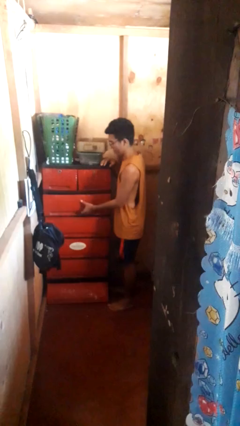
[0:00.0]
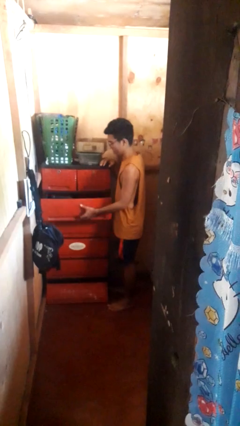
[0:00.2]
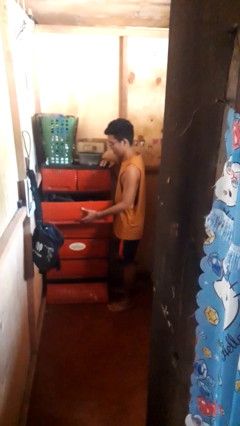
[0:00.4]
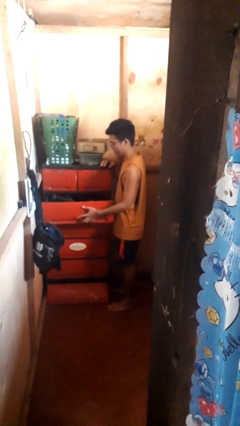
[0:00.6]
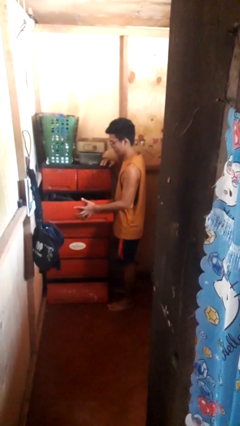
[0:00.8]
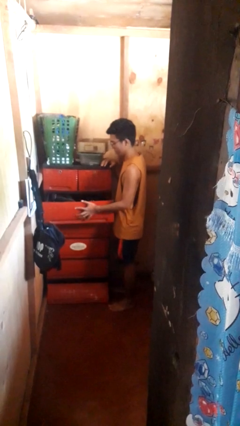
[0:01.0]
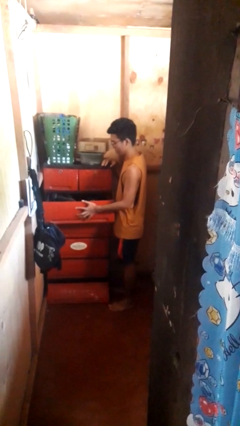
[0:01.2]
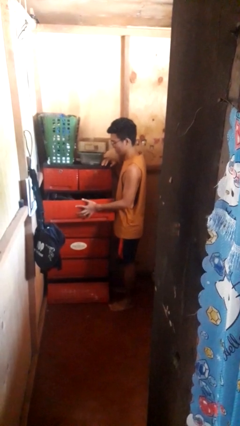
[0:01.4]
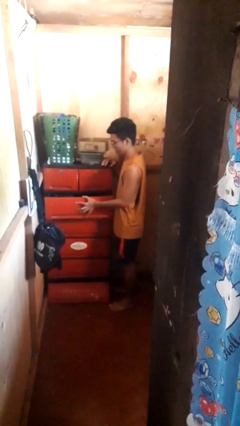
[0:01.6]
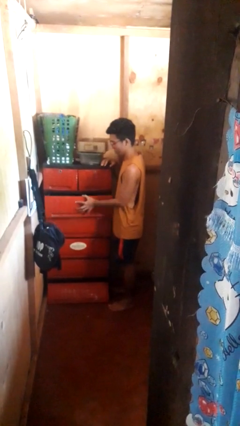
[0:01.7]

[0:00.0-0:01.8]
person opens dresser drawer

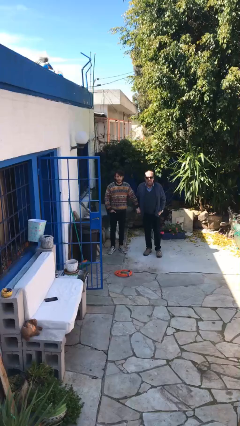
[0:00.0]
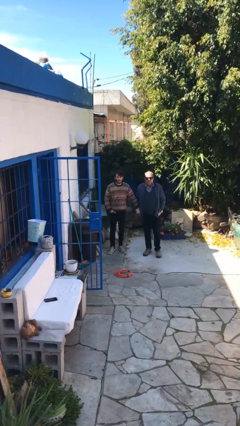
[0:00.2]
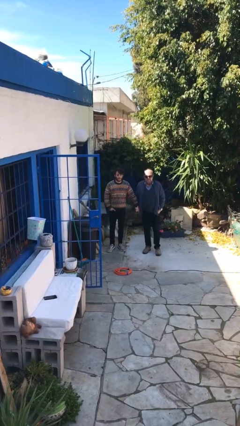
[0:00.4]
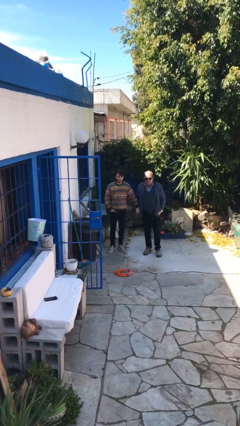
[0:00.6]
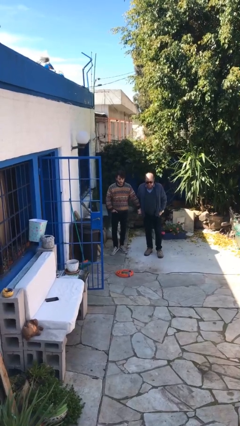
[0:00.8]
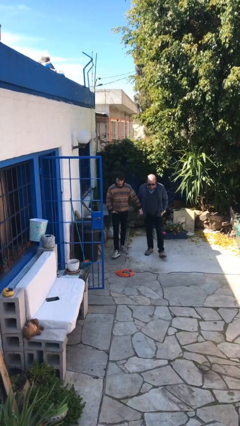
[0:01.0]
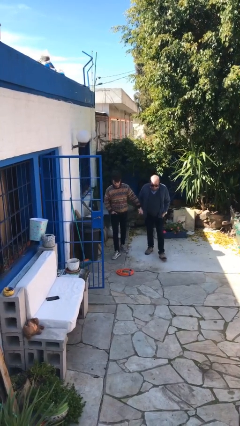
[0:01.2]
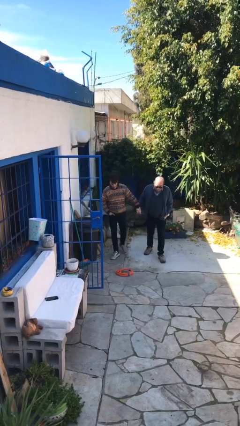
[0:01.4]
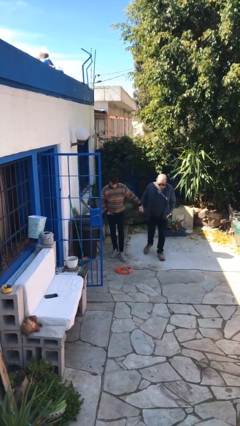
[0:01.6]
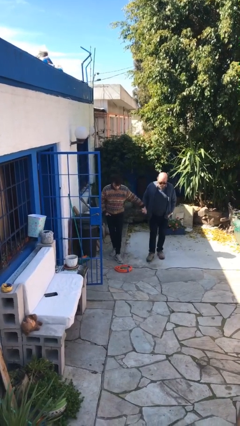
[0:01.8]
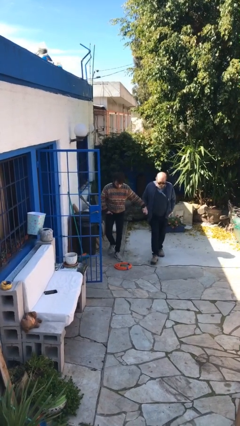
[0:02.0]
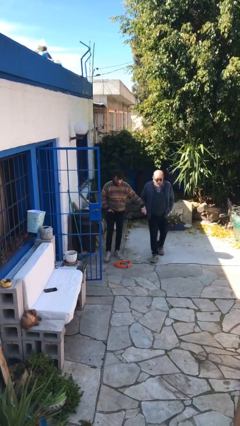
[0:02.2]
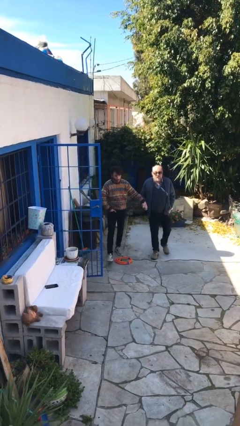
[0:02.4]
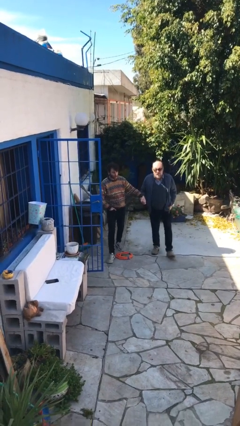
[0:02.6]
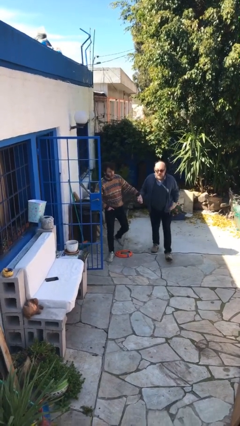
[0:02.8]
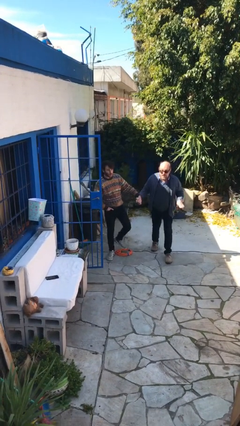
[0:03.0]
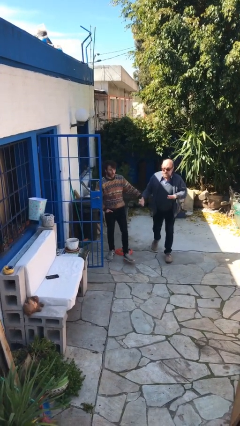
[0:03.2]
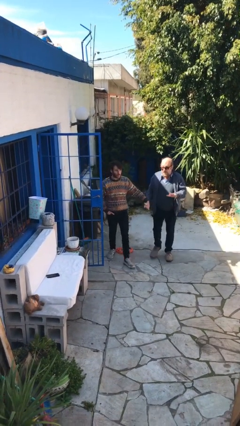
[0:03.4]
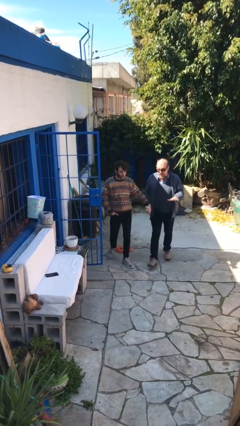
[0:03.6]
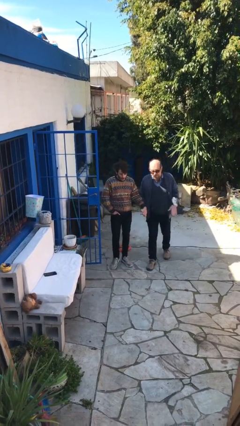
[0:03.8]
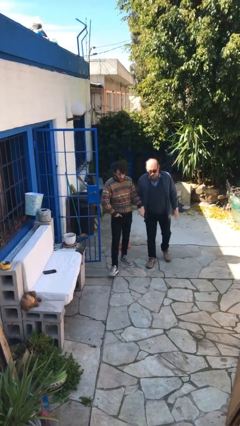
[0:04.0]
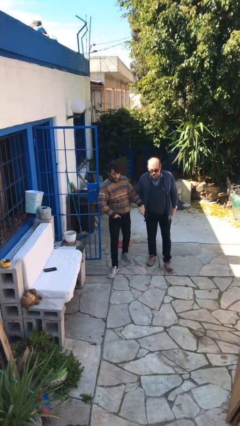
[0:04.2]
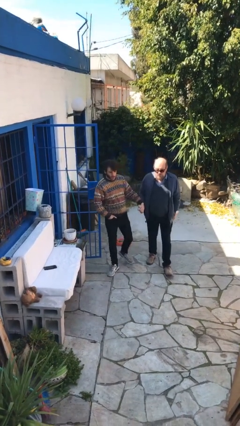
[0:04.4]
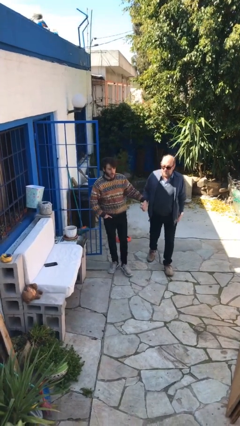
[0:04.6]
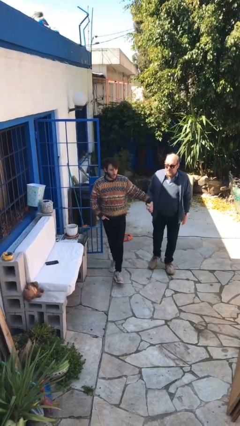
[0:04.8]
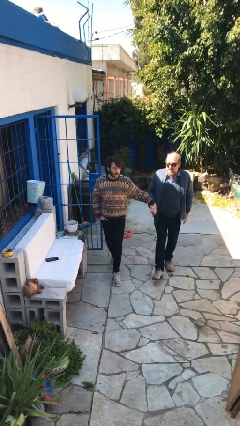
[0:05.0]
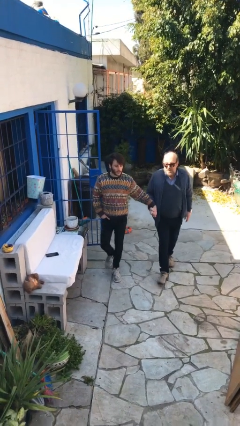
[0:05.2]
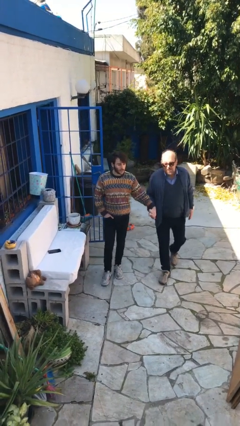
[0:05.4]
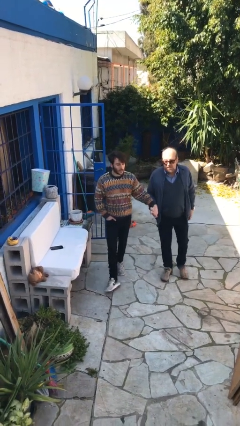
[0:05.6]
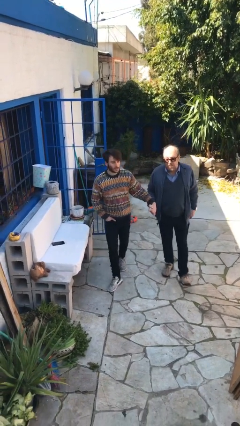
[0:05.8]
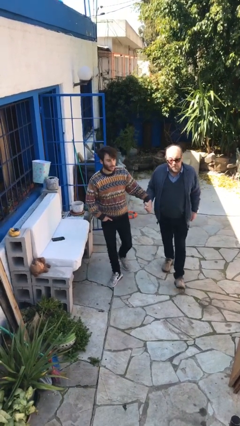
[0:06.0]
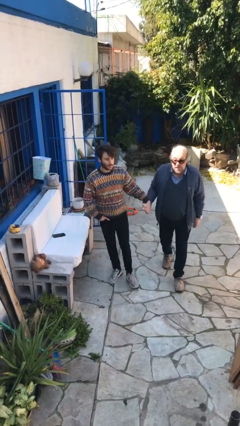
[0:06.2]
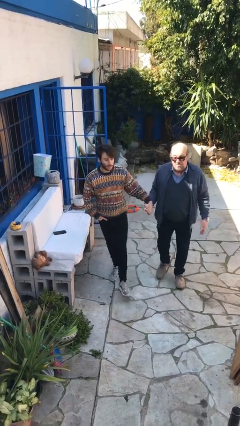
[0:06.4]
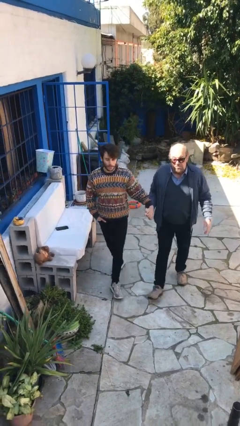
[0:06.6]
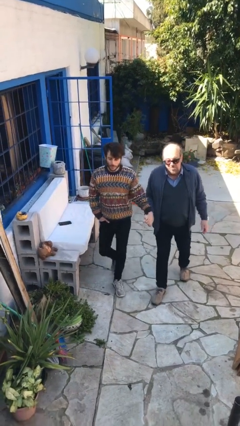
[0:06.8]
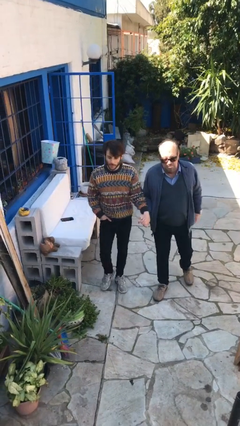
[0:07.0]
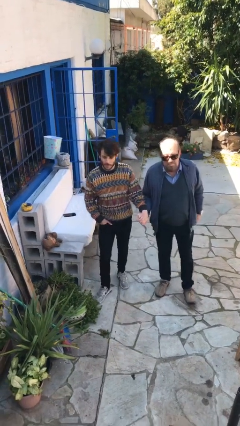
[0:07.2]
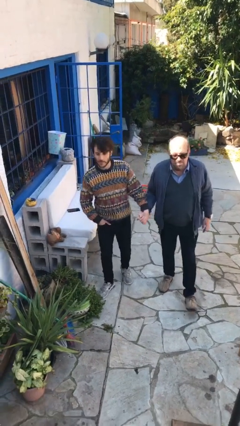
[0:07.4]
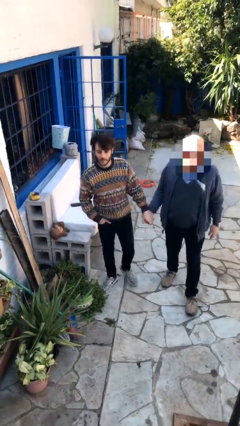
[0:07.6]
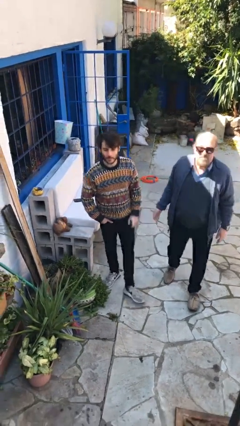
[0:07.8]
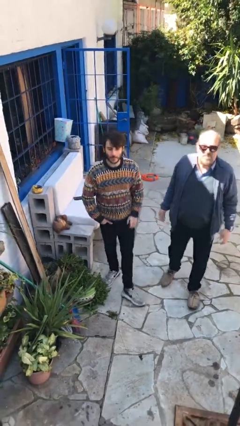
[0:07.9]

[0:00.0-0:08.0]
person holds hand

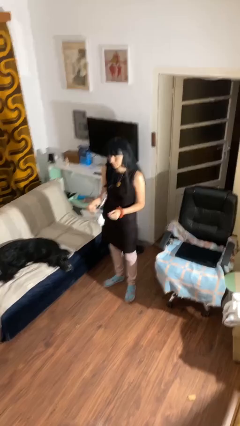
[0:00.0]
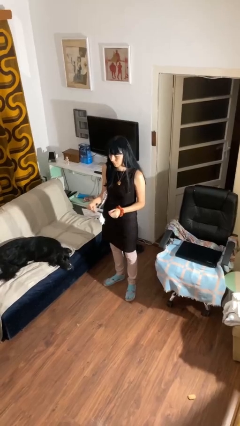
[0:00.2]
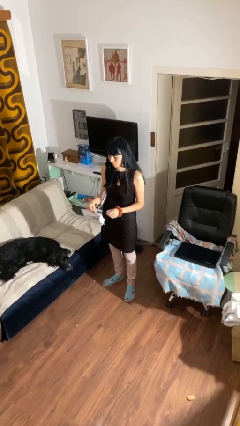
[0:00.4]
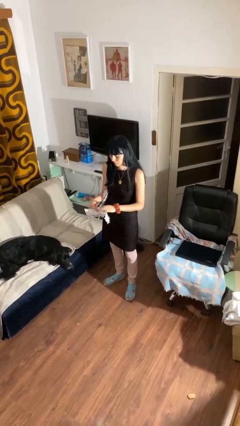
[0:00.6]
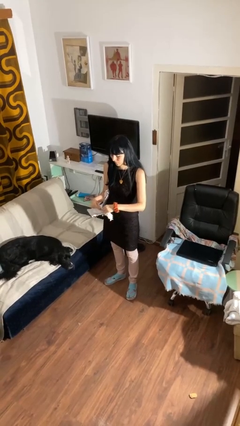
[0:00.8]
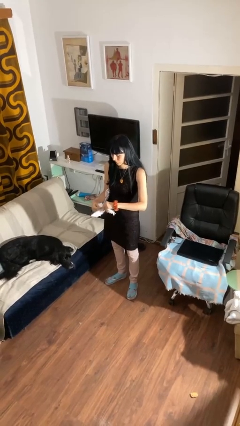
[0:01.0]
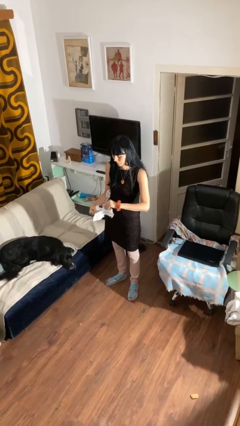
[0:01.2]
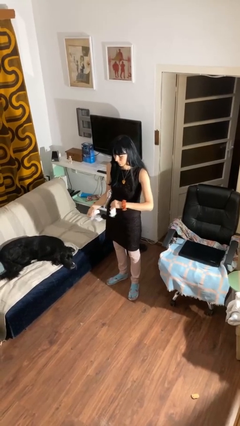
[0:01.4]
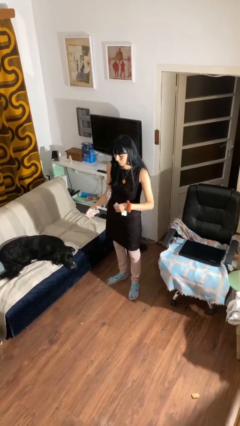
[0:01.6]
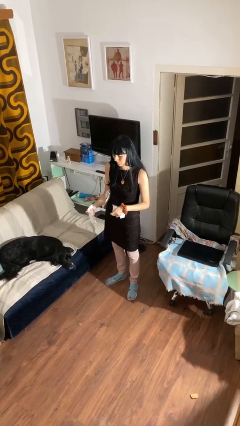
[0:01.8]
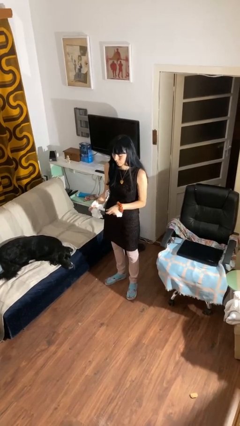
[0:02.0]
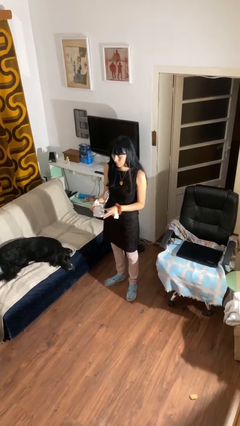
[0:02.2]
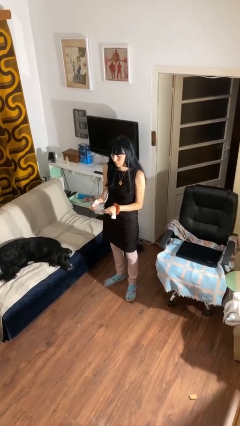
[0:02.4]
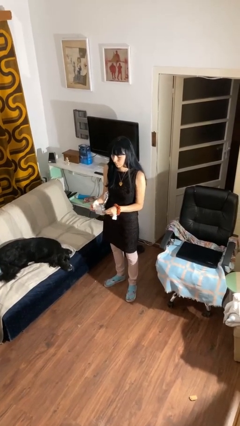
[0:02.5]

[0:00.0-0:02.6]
person tears paper

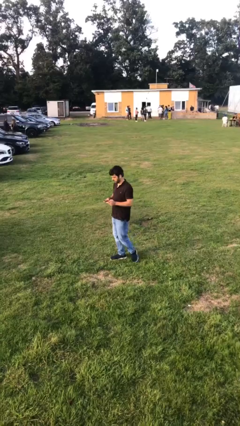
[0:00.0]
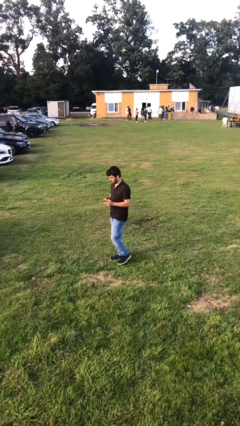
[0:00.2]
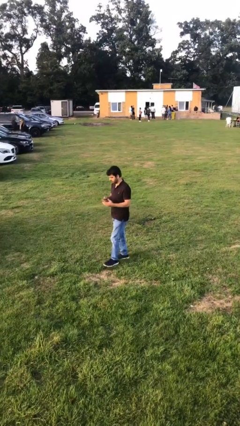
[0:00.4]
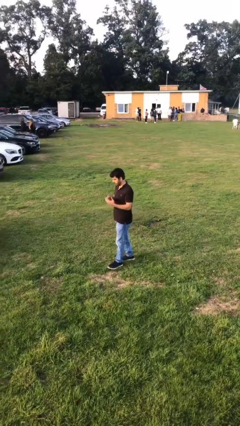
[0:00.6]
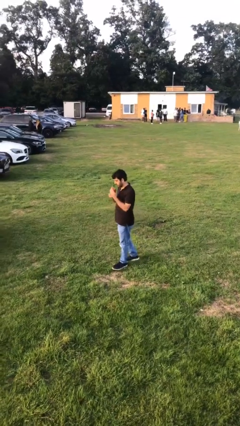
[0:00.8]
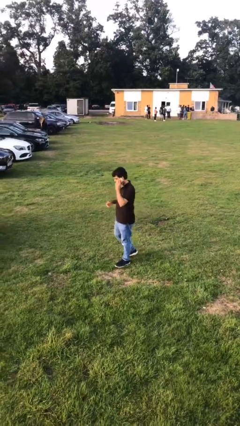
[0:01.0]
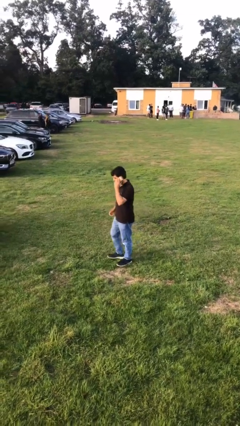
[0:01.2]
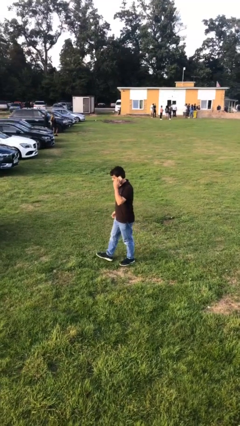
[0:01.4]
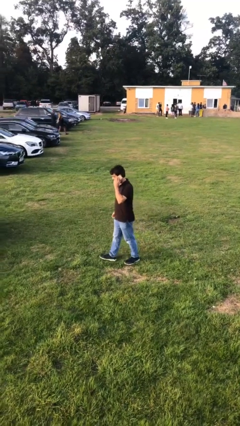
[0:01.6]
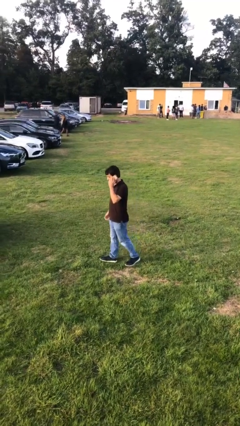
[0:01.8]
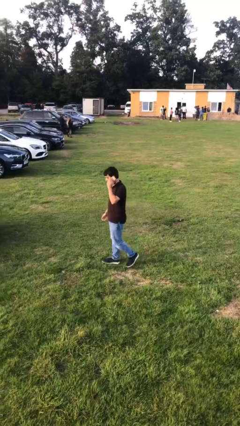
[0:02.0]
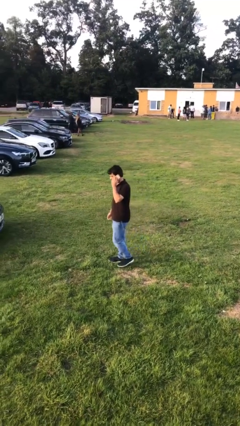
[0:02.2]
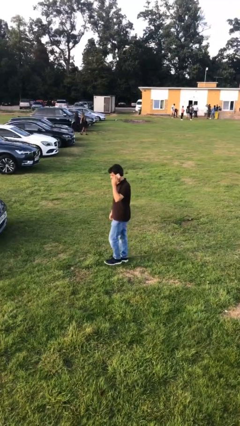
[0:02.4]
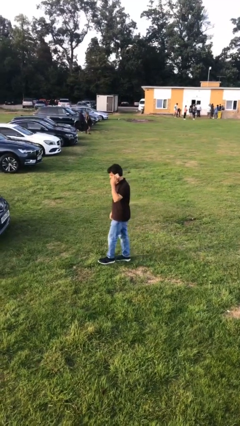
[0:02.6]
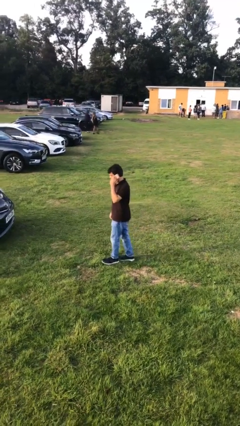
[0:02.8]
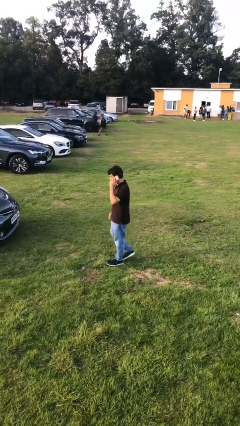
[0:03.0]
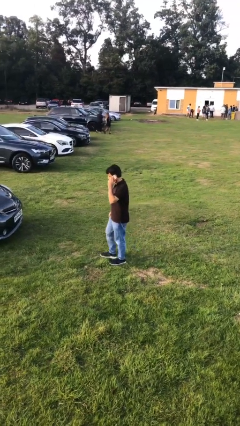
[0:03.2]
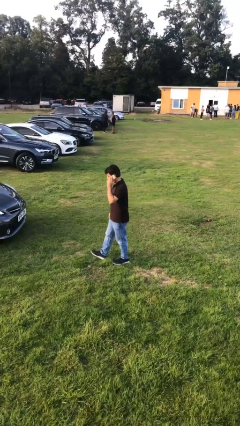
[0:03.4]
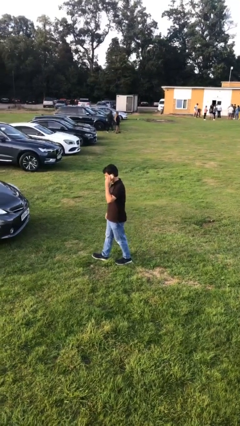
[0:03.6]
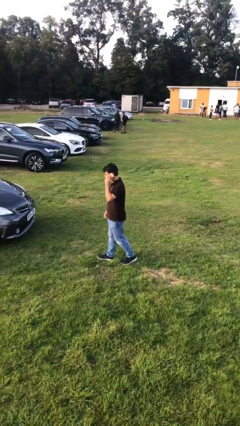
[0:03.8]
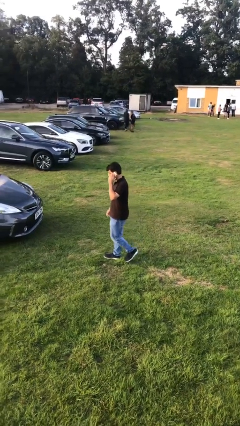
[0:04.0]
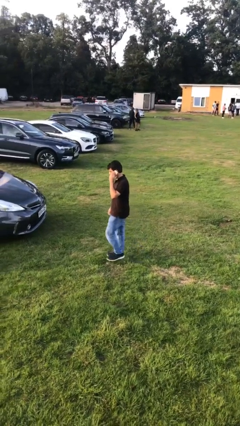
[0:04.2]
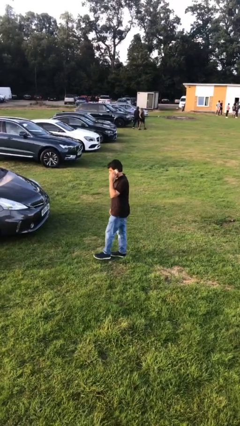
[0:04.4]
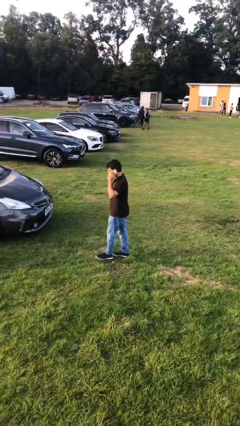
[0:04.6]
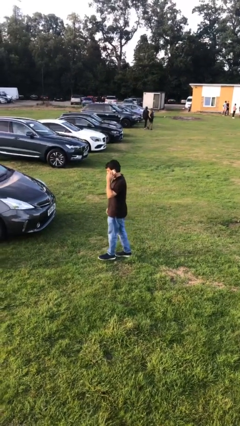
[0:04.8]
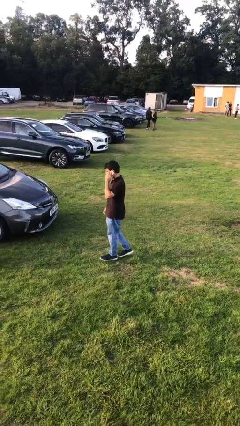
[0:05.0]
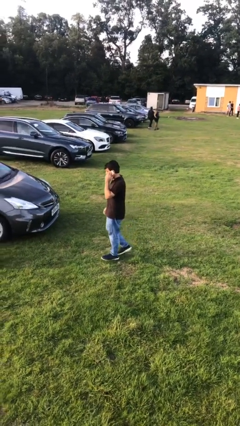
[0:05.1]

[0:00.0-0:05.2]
person talks on phone
